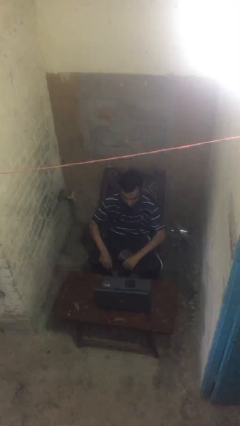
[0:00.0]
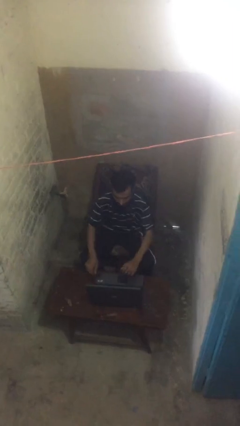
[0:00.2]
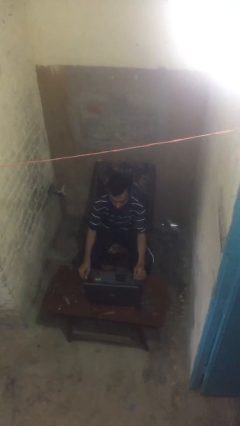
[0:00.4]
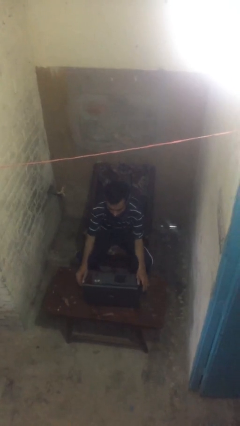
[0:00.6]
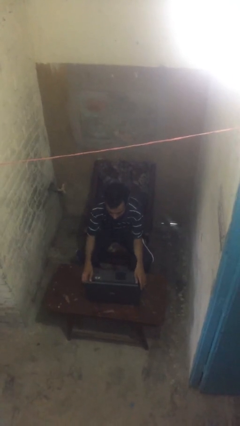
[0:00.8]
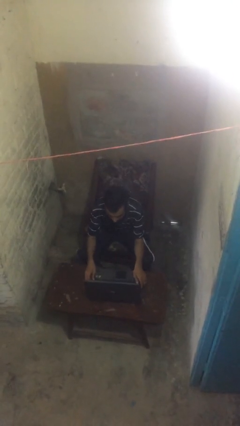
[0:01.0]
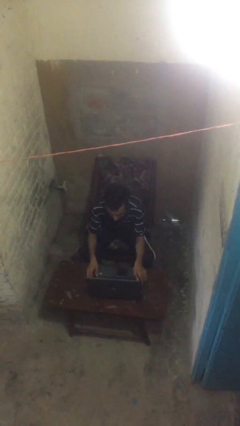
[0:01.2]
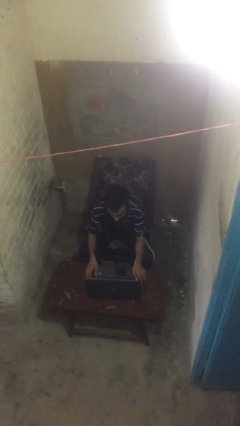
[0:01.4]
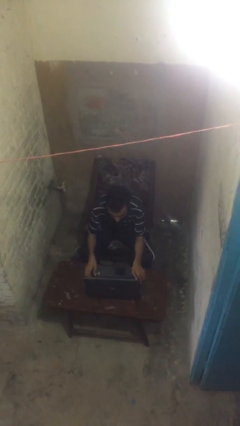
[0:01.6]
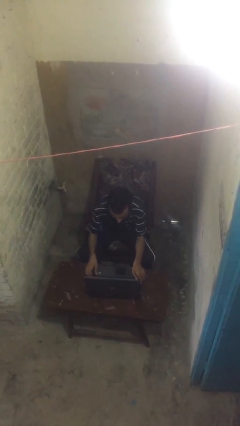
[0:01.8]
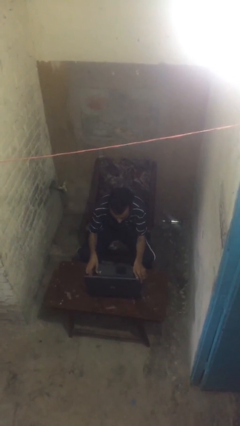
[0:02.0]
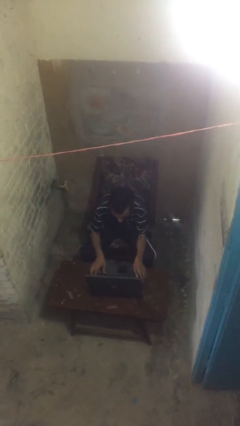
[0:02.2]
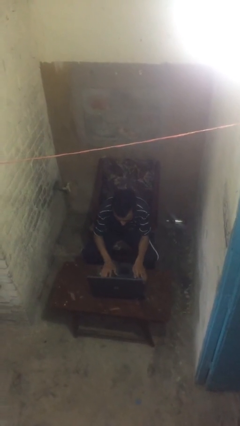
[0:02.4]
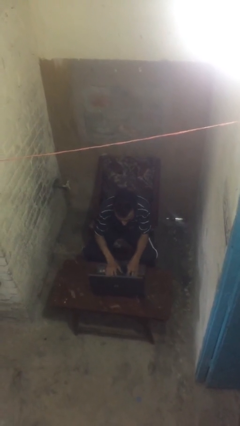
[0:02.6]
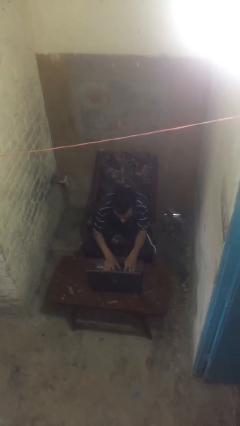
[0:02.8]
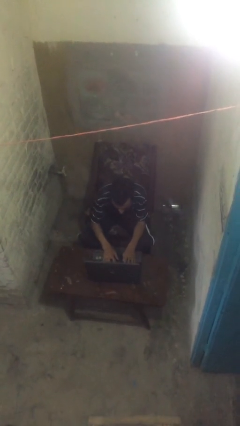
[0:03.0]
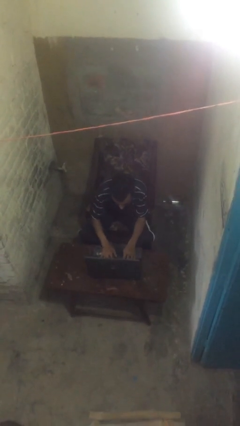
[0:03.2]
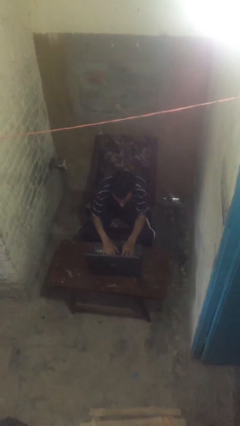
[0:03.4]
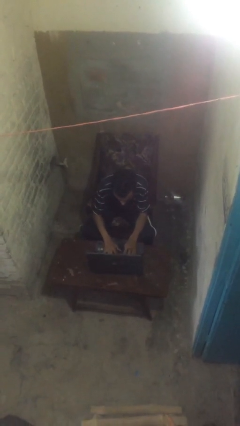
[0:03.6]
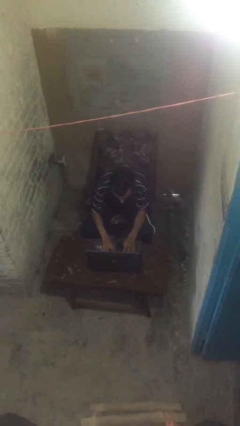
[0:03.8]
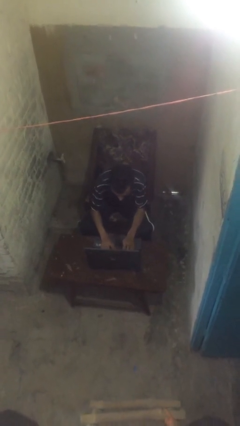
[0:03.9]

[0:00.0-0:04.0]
person interacts with laptop

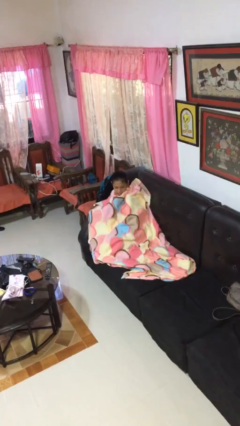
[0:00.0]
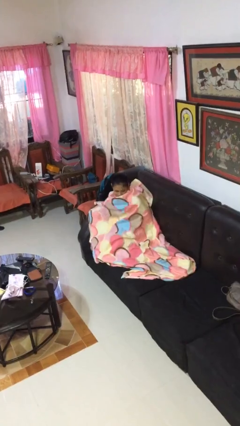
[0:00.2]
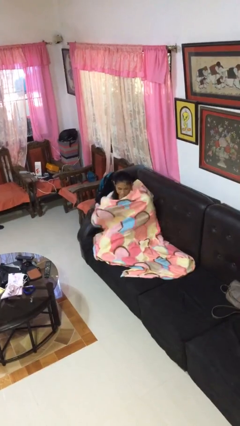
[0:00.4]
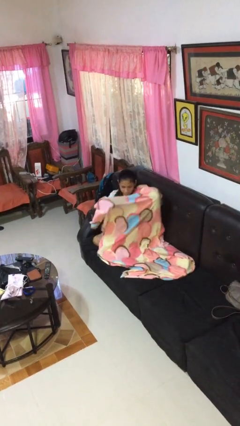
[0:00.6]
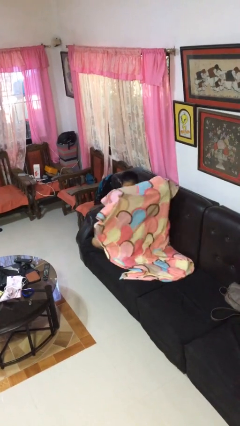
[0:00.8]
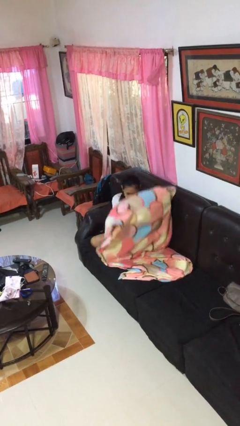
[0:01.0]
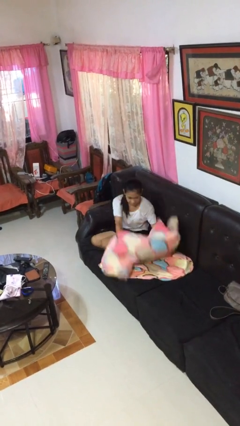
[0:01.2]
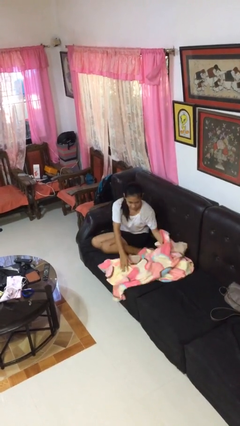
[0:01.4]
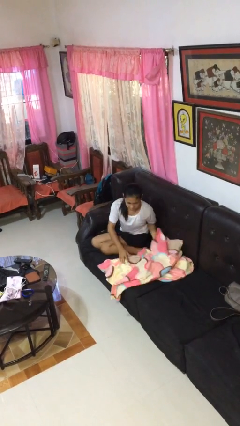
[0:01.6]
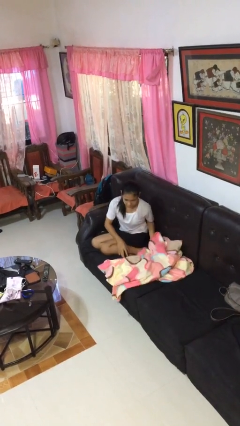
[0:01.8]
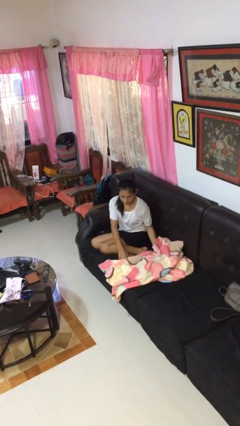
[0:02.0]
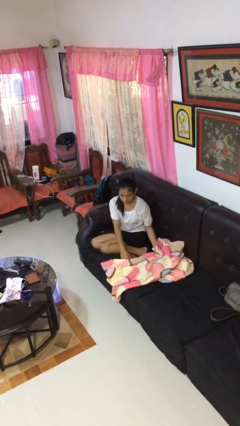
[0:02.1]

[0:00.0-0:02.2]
person uncovers with blanket

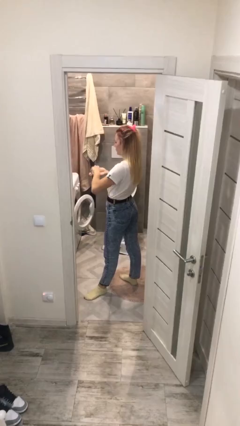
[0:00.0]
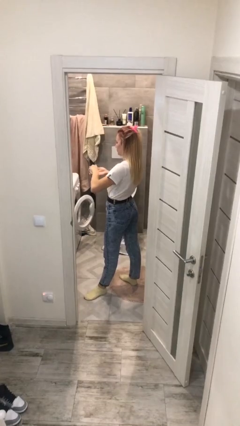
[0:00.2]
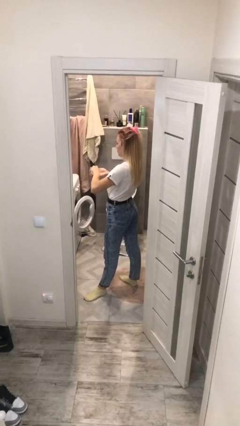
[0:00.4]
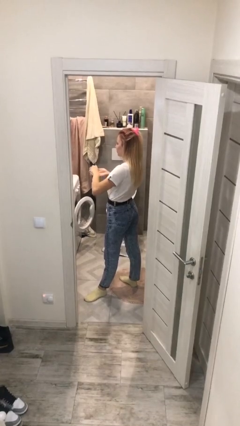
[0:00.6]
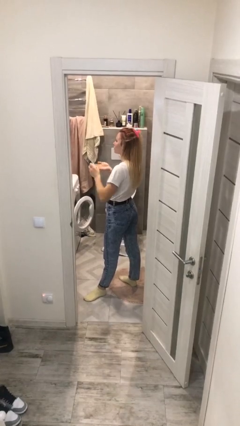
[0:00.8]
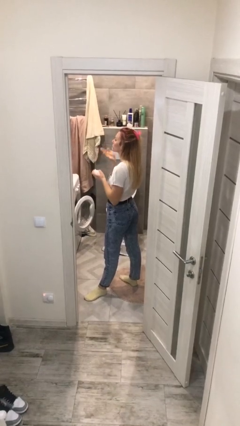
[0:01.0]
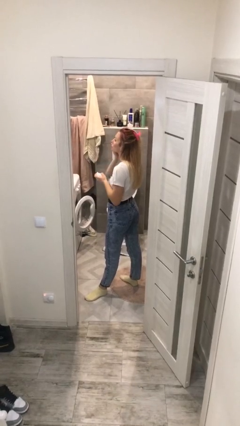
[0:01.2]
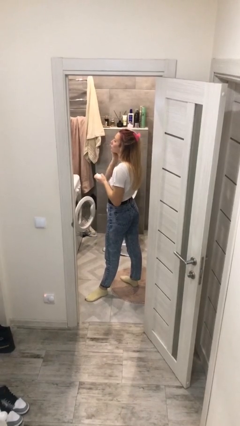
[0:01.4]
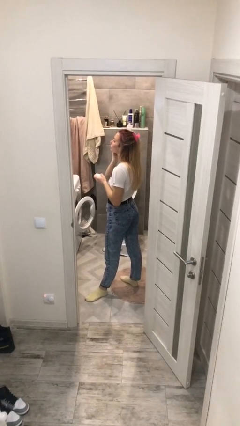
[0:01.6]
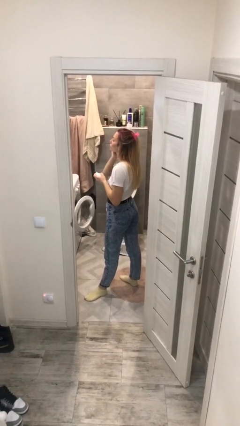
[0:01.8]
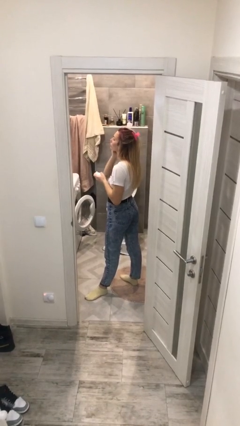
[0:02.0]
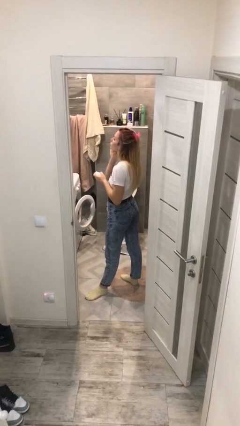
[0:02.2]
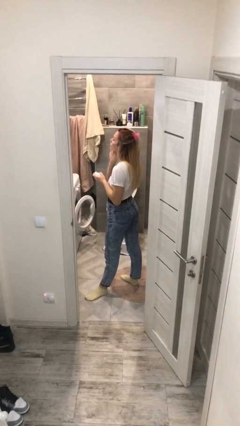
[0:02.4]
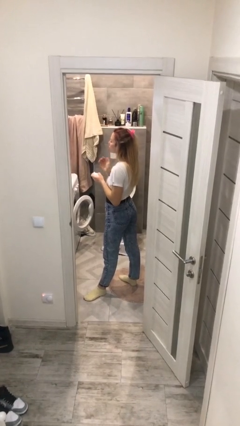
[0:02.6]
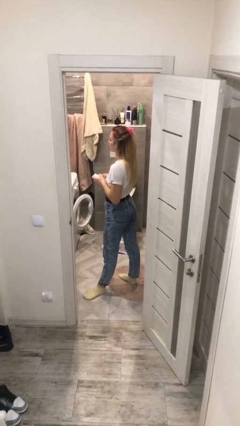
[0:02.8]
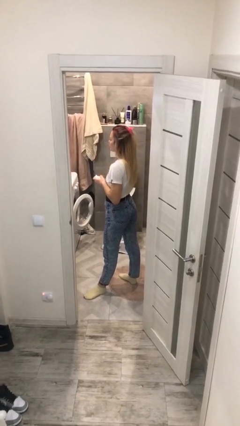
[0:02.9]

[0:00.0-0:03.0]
person applies facial moisturizer

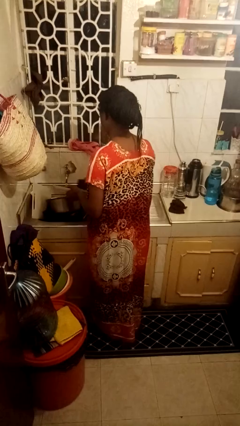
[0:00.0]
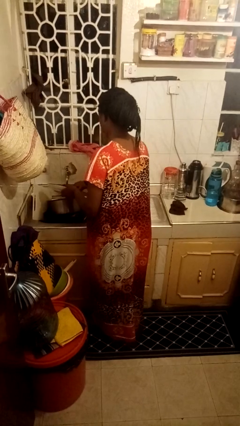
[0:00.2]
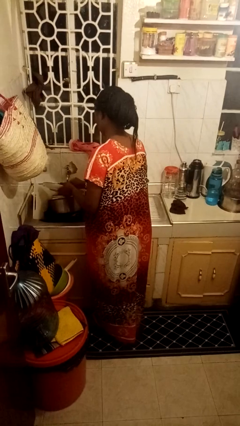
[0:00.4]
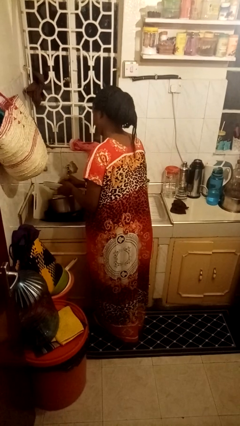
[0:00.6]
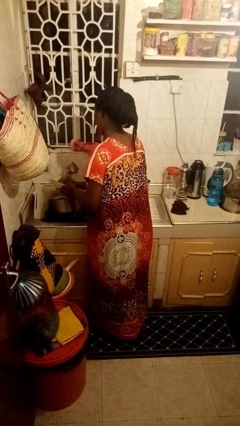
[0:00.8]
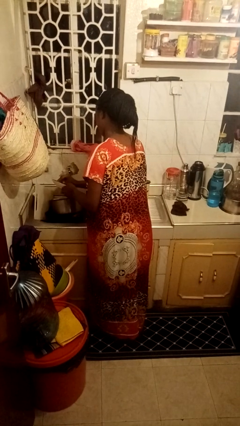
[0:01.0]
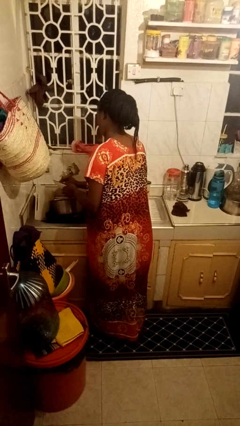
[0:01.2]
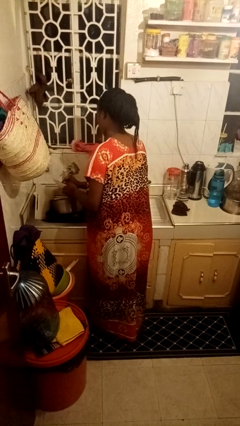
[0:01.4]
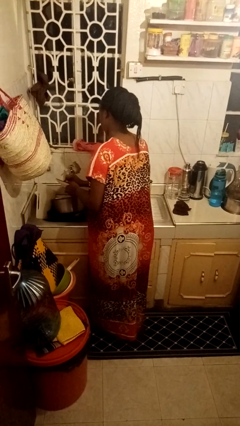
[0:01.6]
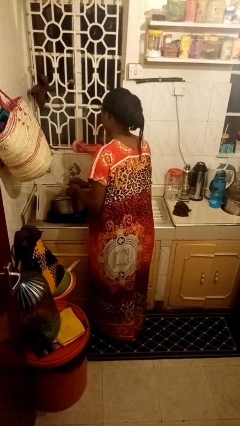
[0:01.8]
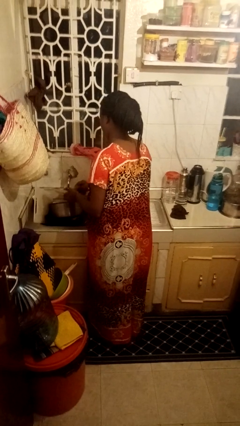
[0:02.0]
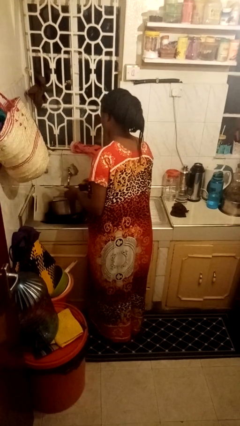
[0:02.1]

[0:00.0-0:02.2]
person washes dish

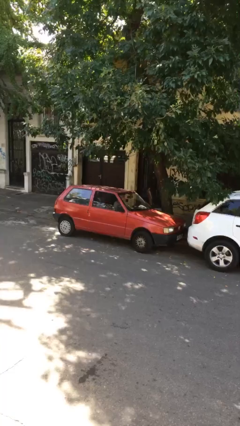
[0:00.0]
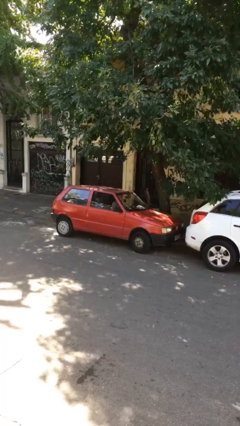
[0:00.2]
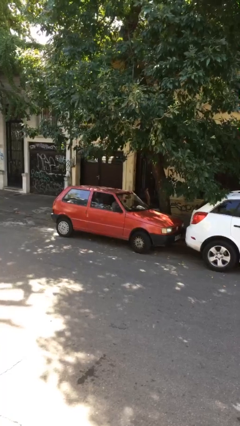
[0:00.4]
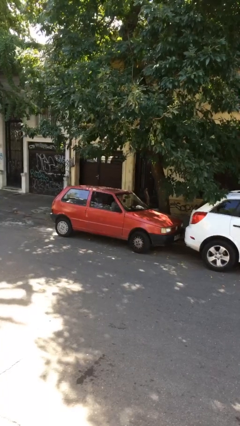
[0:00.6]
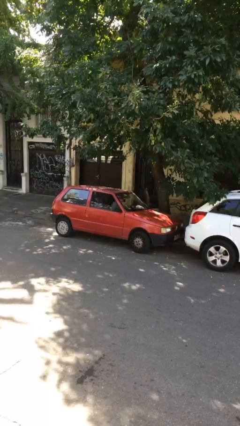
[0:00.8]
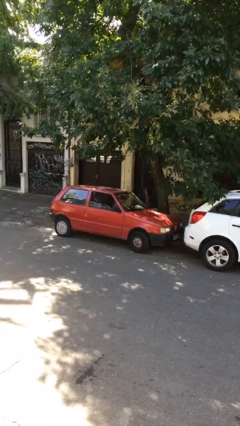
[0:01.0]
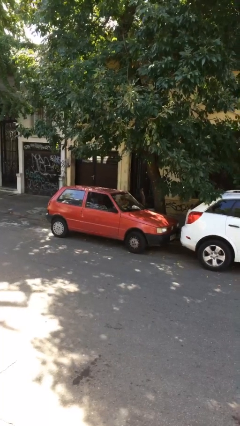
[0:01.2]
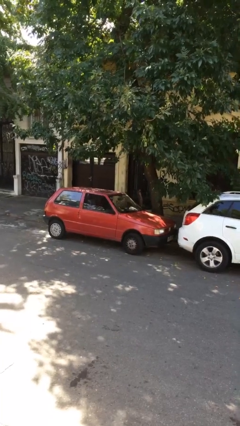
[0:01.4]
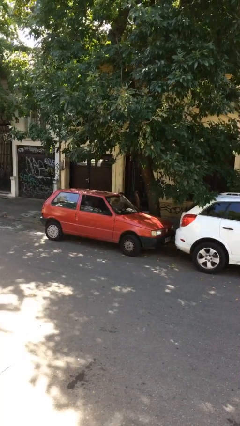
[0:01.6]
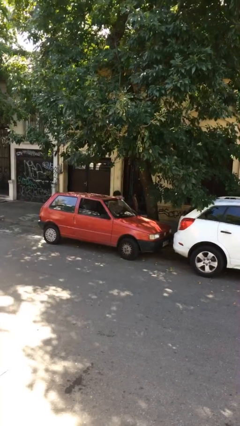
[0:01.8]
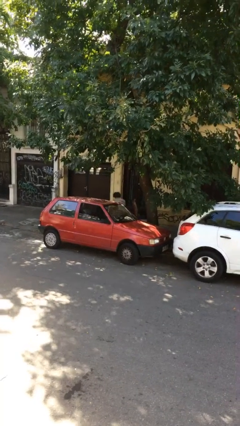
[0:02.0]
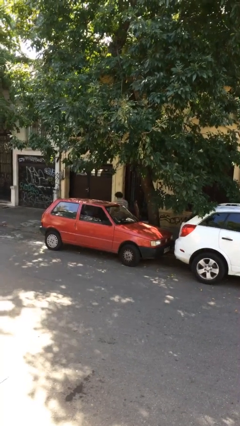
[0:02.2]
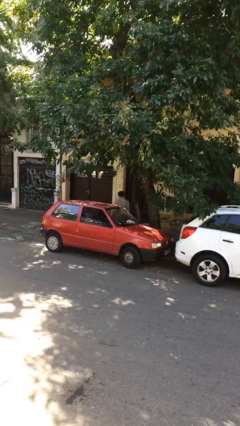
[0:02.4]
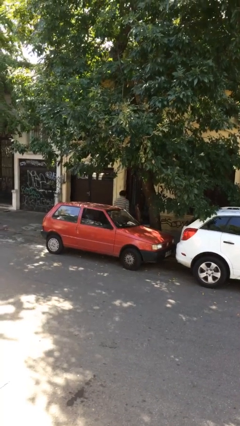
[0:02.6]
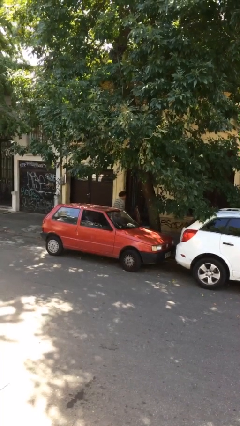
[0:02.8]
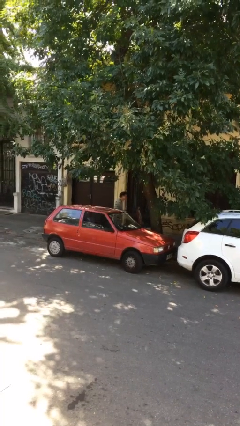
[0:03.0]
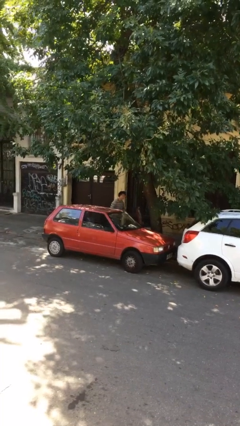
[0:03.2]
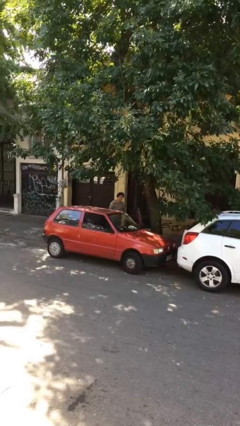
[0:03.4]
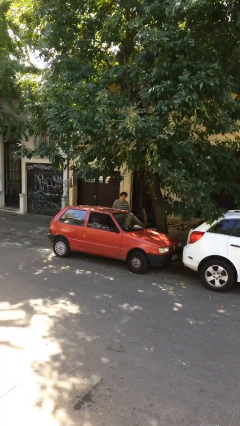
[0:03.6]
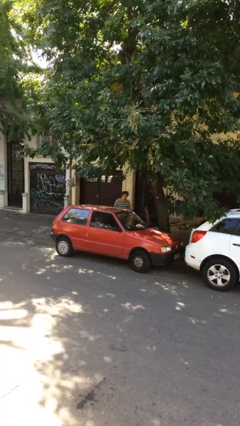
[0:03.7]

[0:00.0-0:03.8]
person exits car

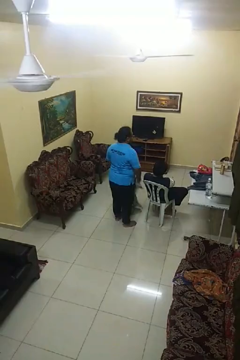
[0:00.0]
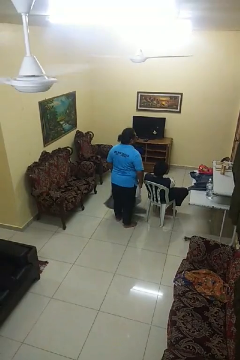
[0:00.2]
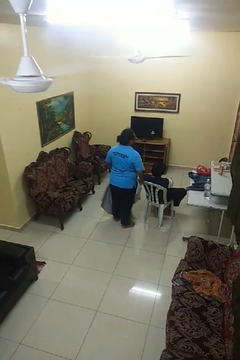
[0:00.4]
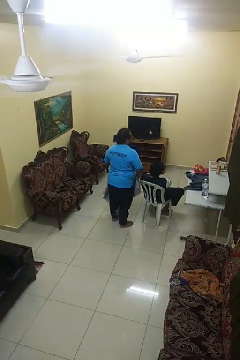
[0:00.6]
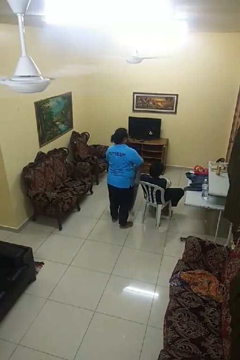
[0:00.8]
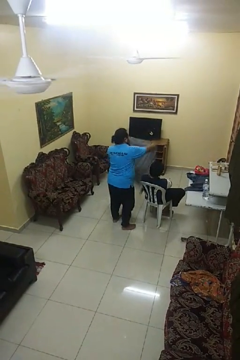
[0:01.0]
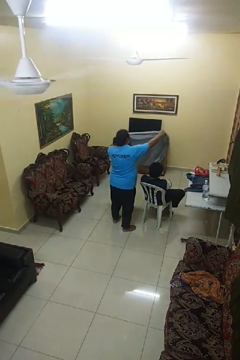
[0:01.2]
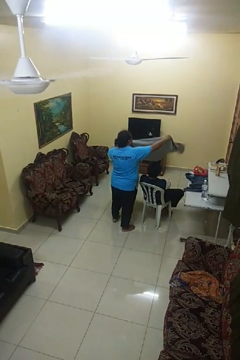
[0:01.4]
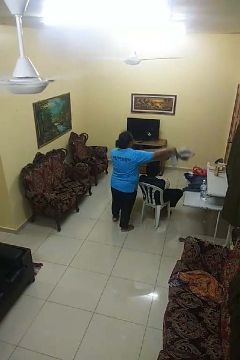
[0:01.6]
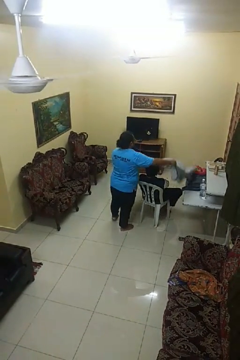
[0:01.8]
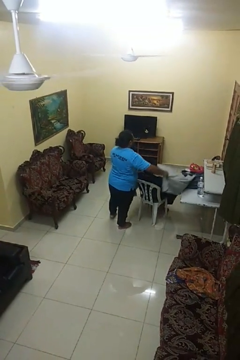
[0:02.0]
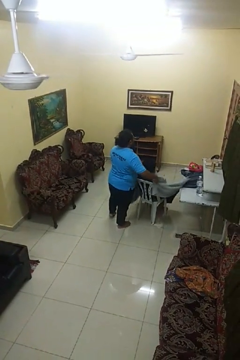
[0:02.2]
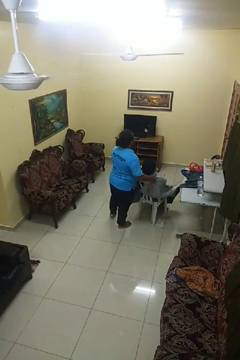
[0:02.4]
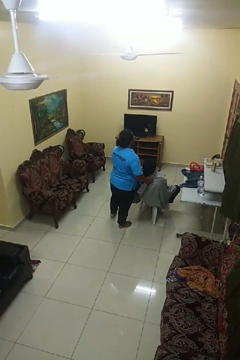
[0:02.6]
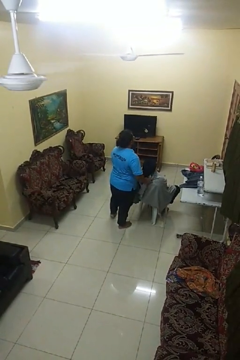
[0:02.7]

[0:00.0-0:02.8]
person covers friend with blanket
